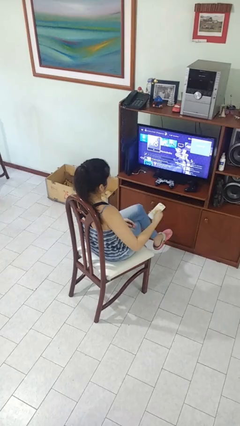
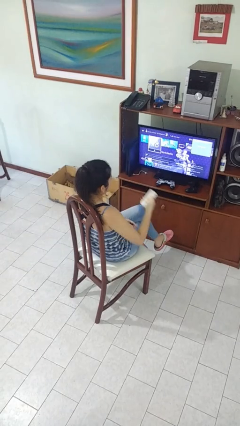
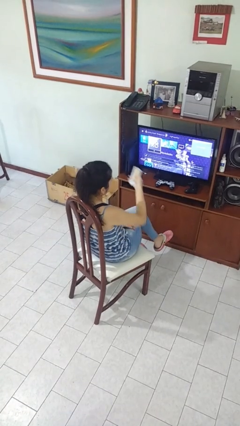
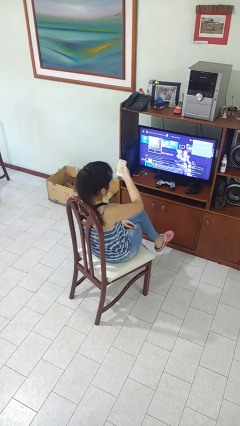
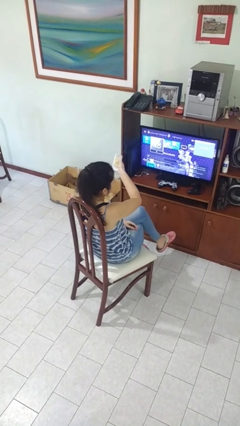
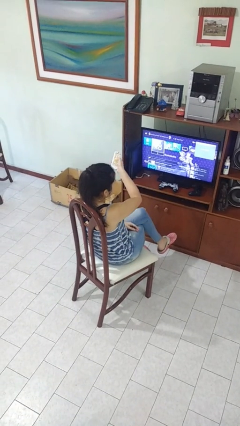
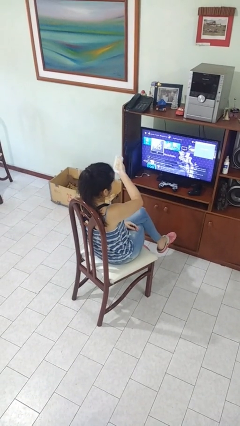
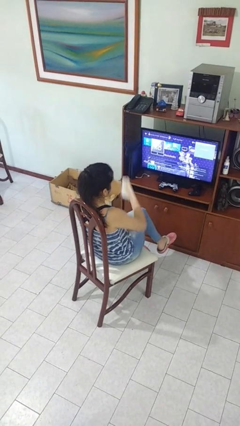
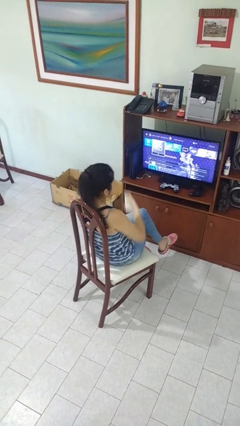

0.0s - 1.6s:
person uses television remote

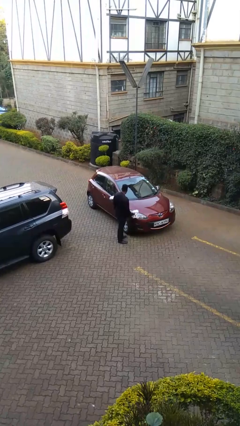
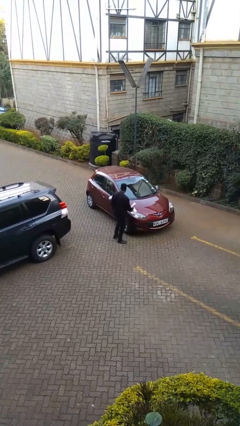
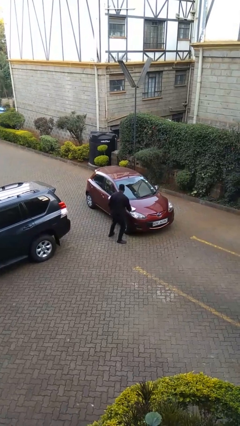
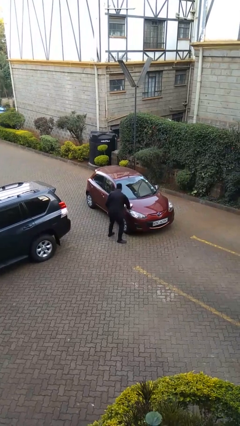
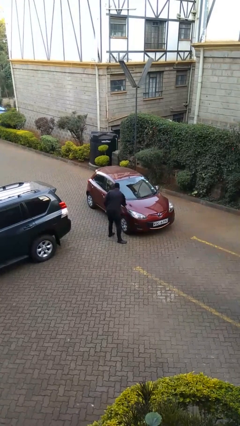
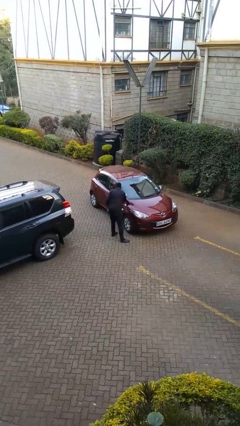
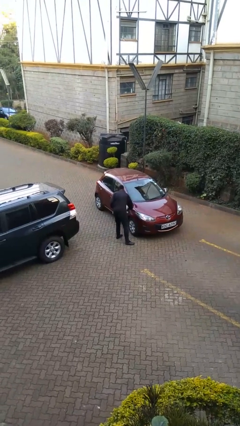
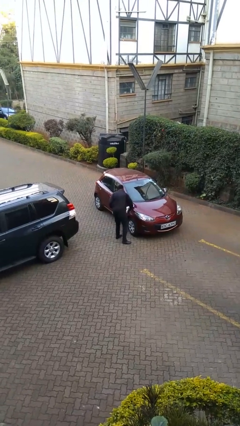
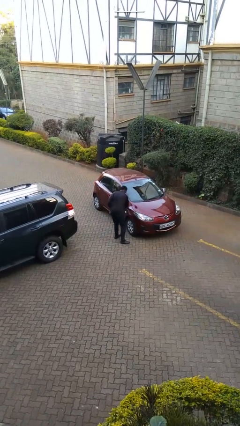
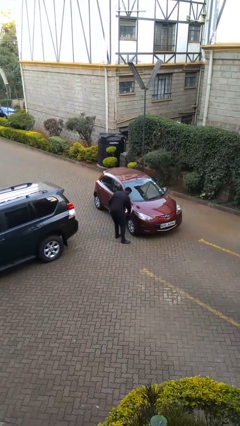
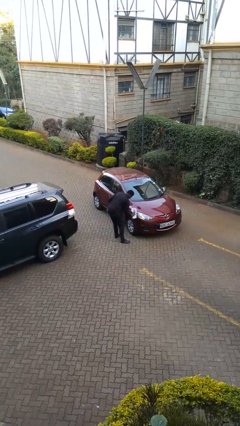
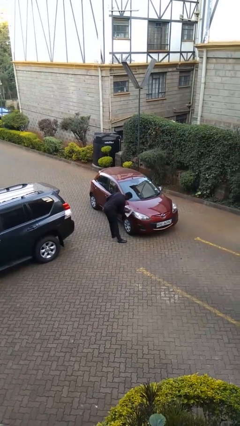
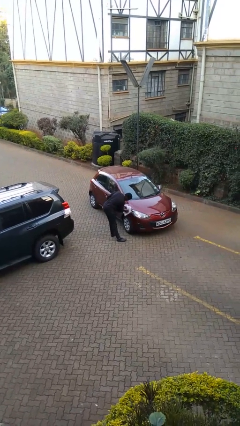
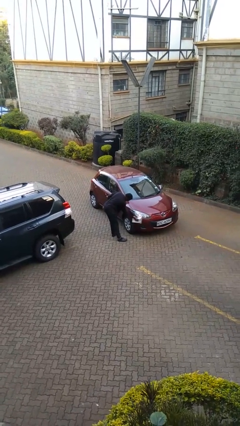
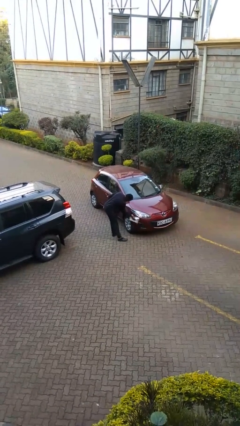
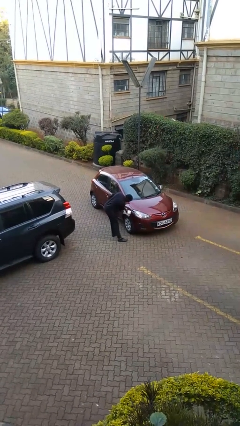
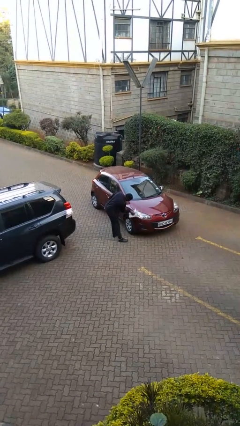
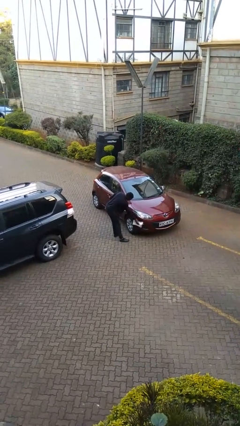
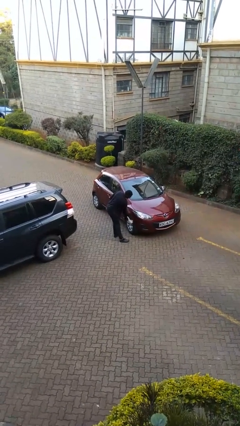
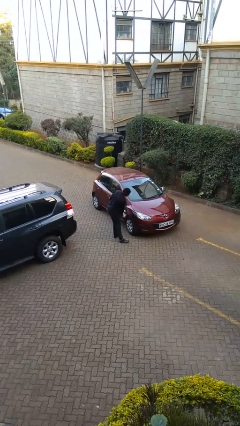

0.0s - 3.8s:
person polishes car with rag

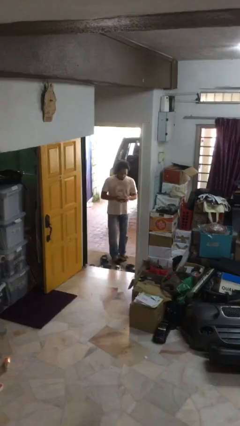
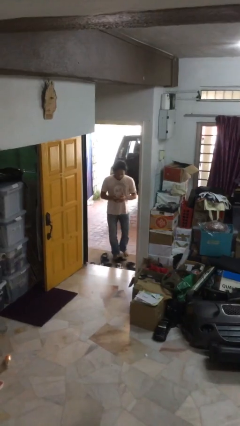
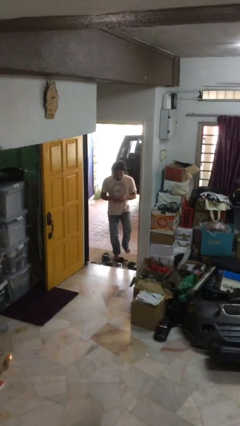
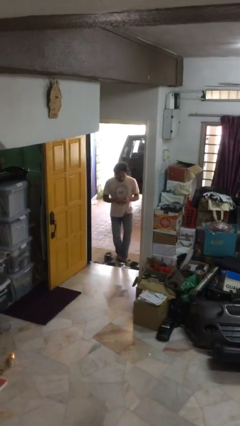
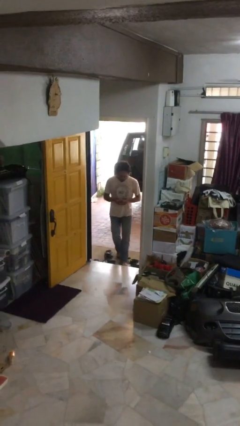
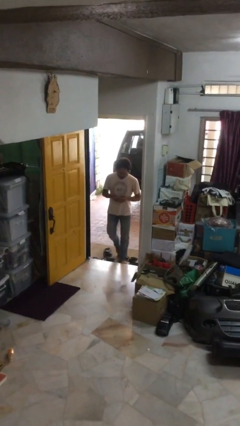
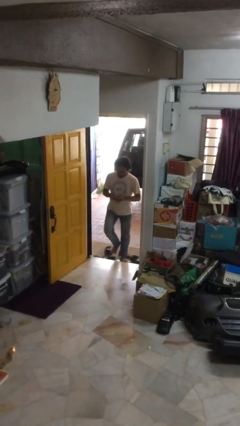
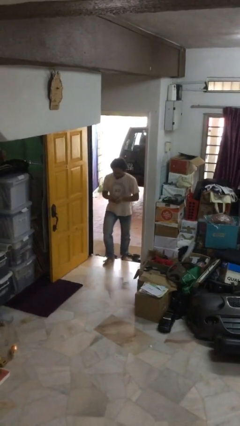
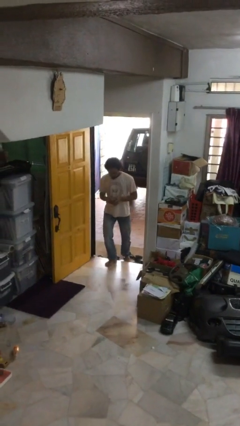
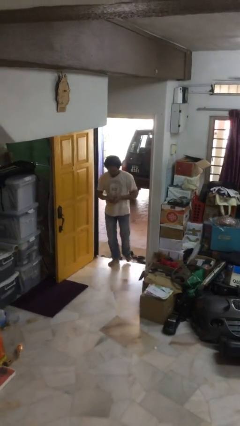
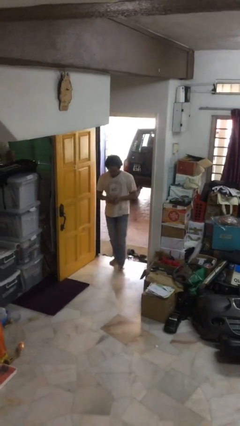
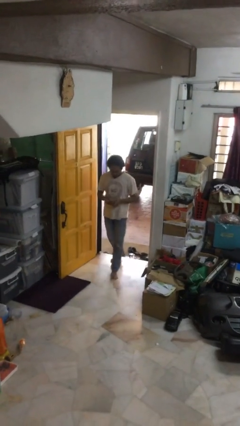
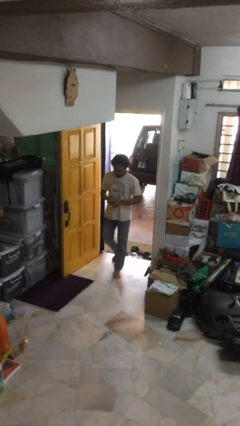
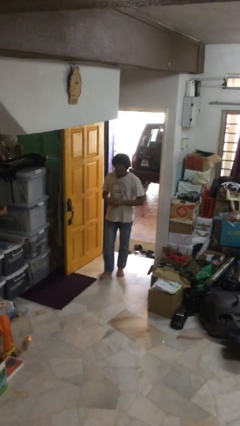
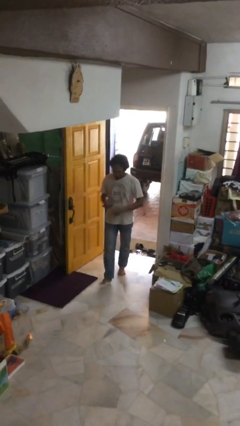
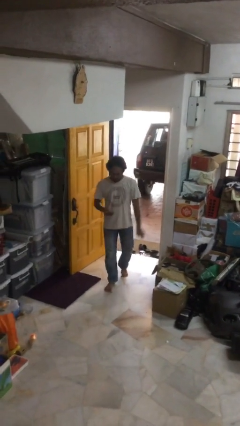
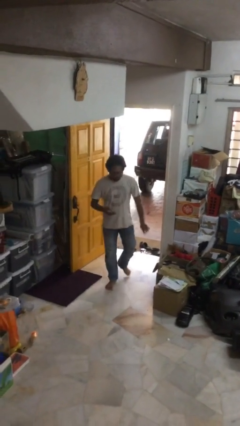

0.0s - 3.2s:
person enters scene through structure

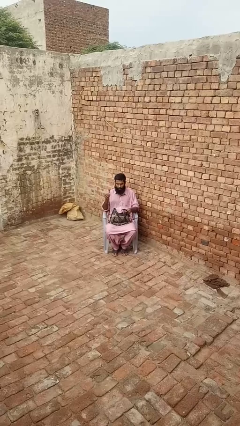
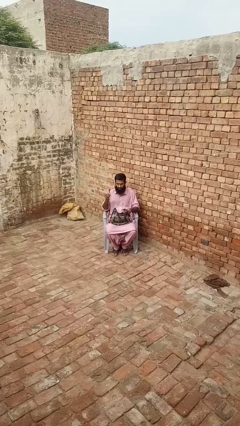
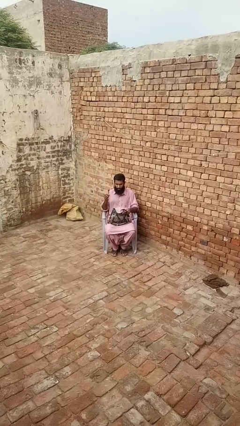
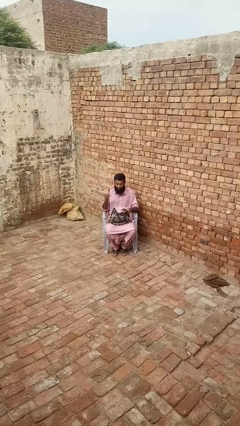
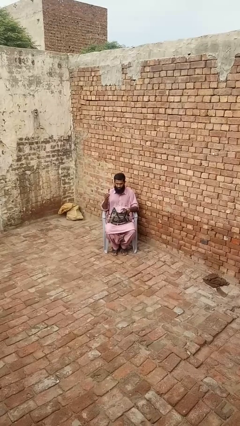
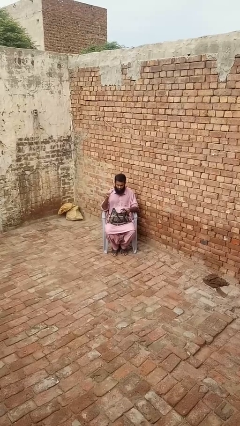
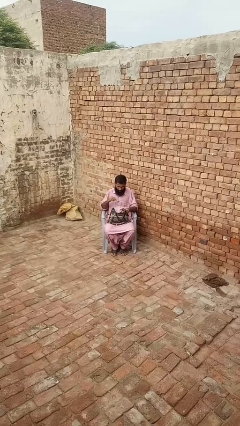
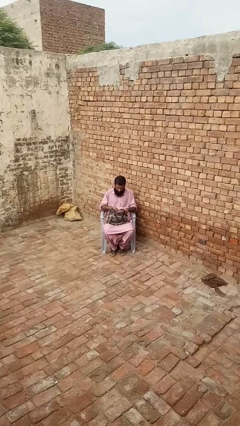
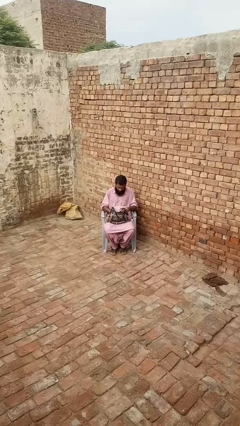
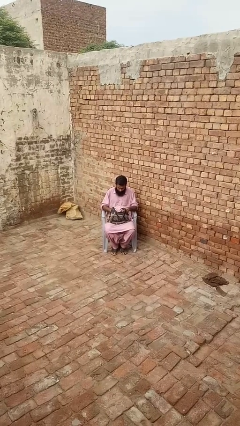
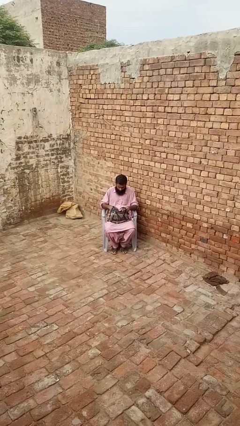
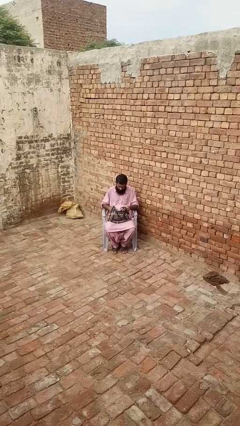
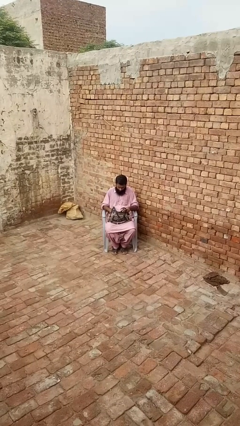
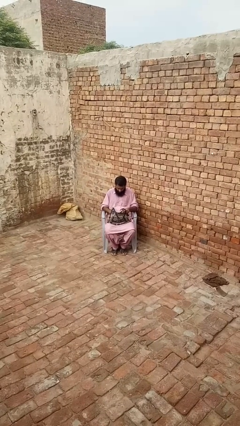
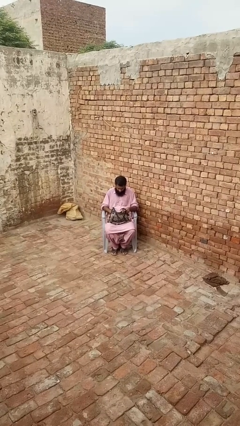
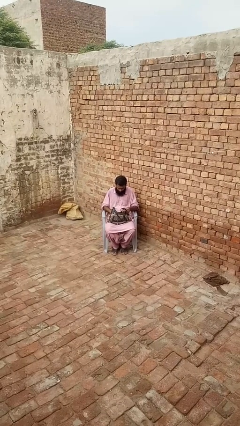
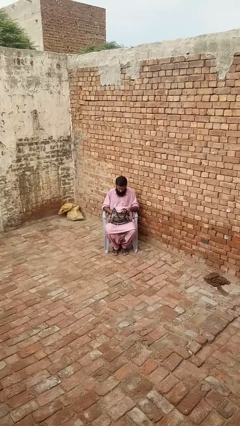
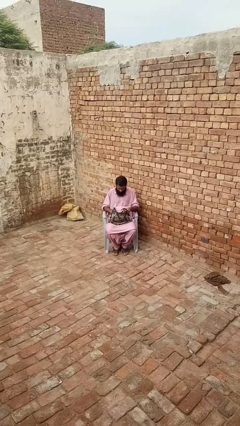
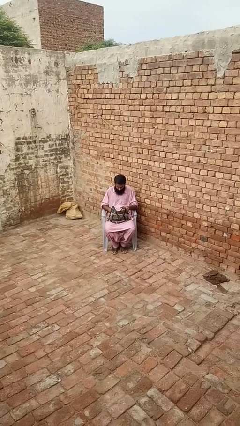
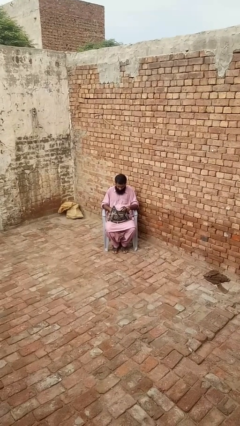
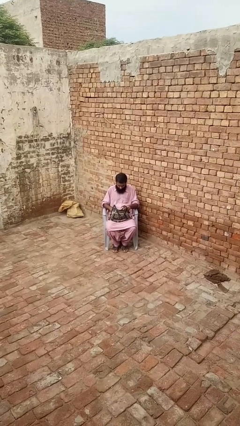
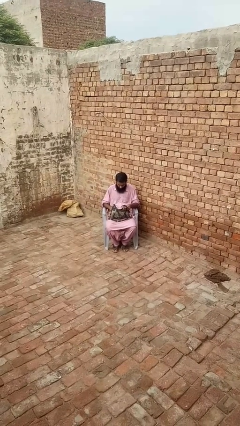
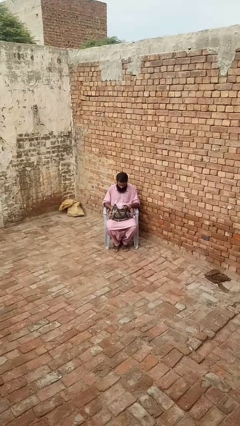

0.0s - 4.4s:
person puts object into purse

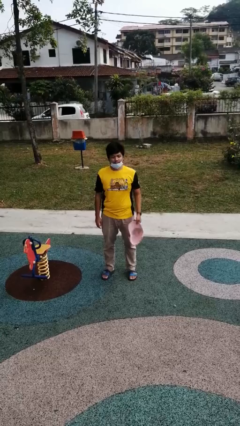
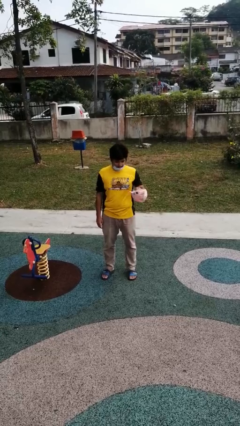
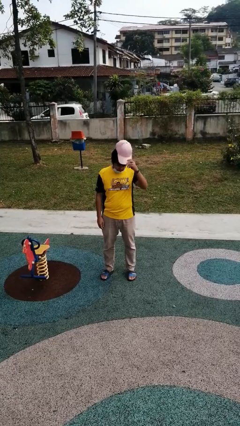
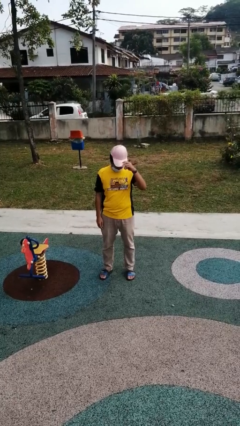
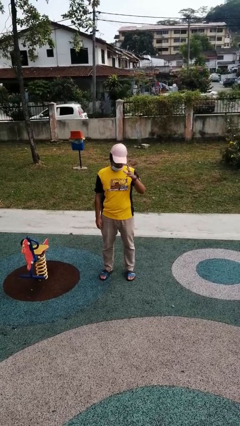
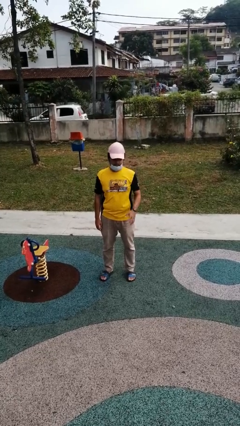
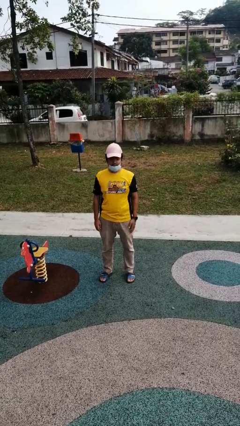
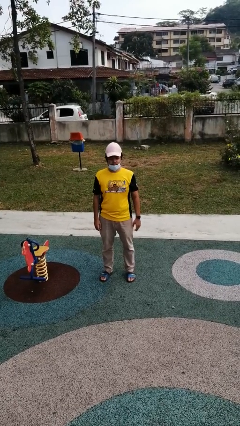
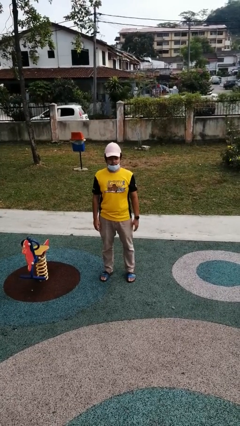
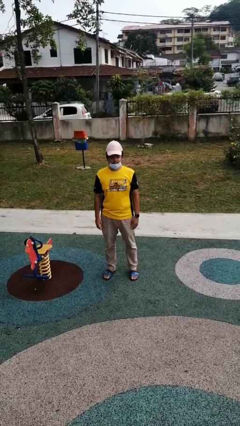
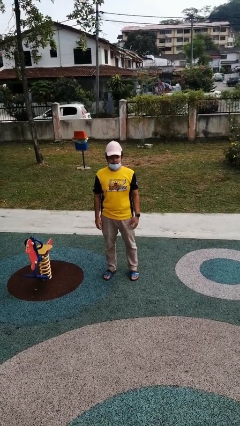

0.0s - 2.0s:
person puts on hat

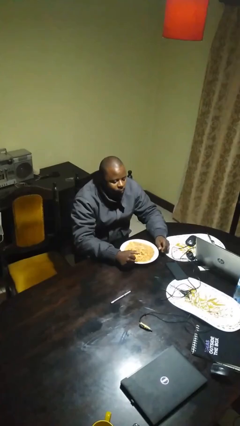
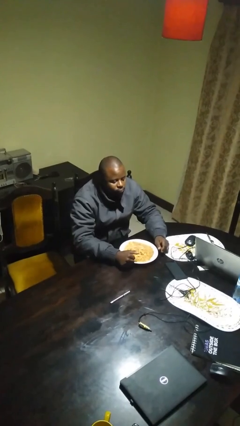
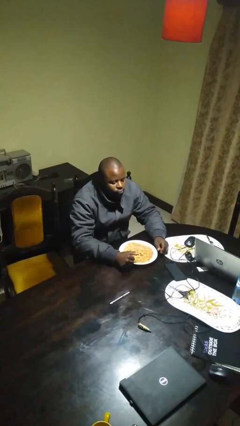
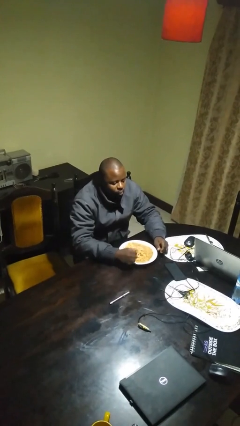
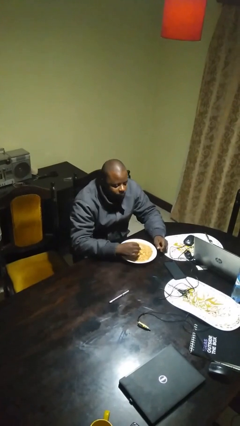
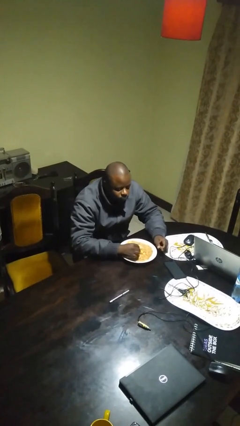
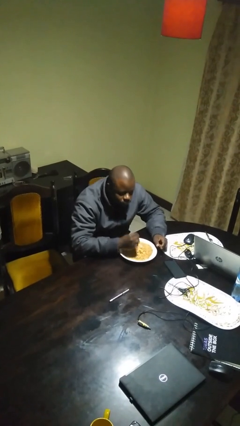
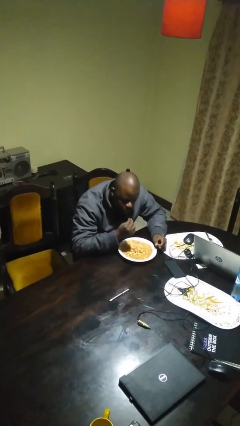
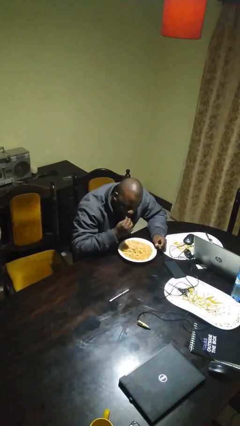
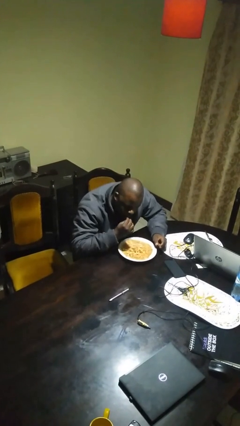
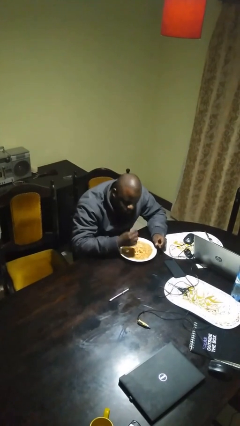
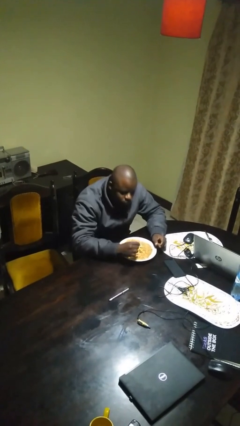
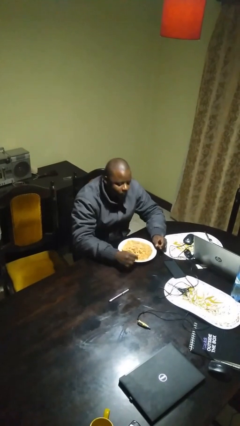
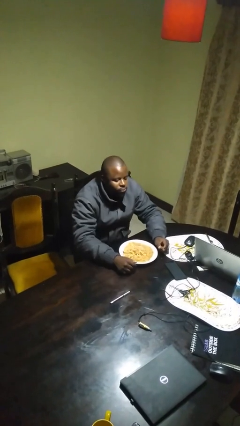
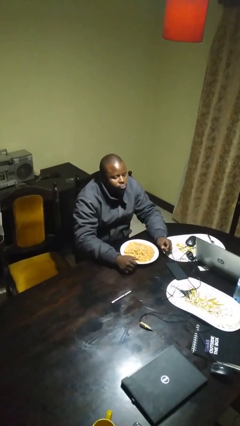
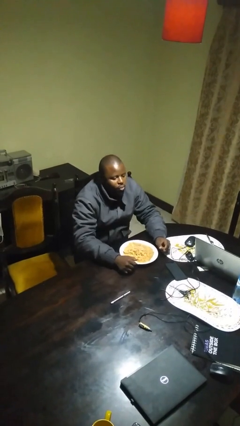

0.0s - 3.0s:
person eats with hands
